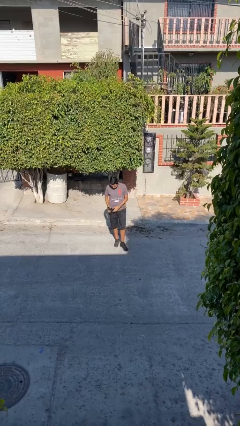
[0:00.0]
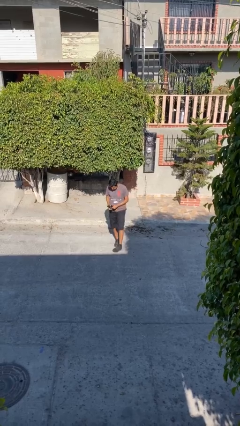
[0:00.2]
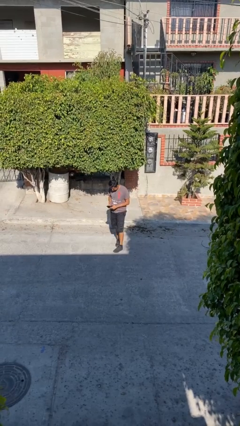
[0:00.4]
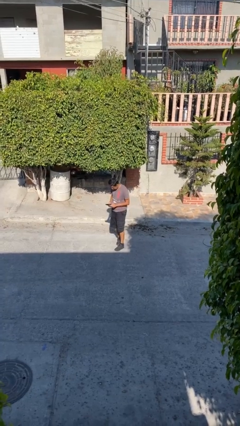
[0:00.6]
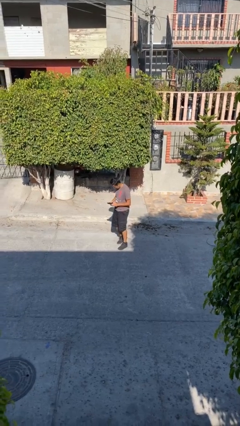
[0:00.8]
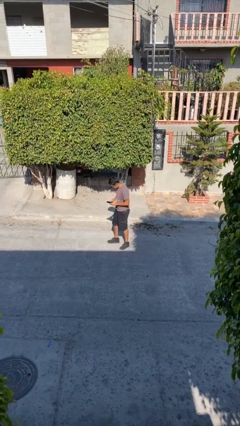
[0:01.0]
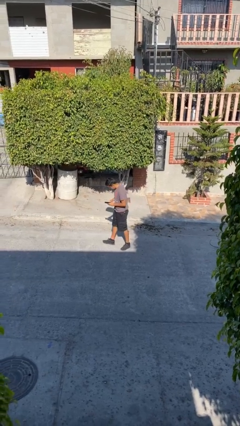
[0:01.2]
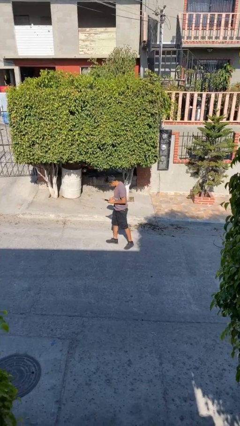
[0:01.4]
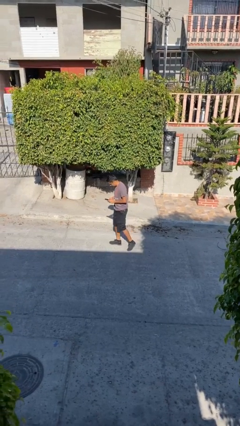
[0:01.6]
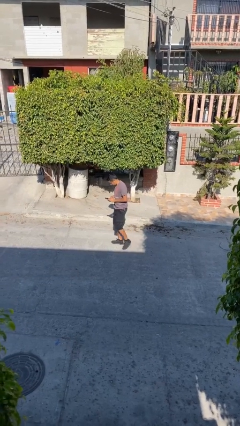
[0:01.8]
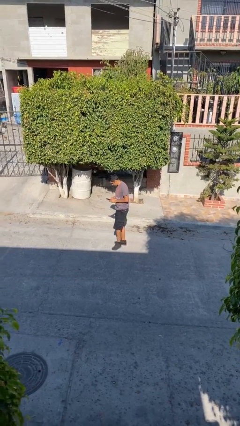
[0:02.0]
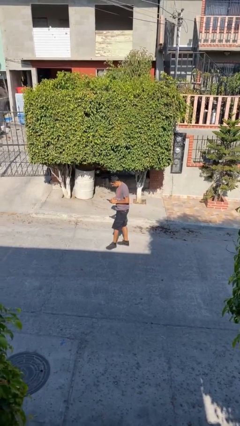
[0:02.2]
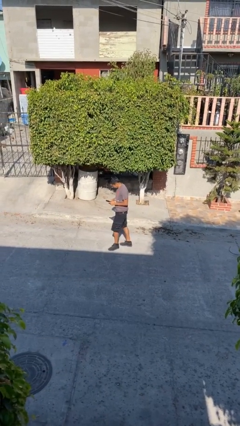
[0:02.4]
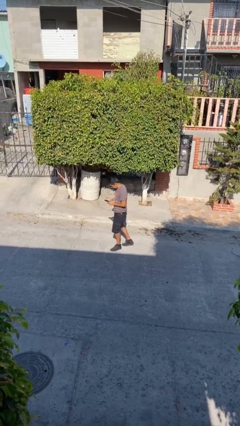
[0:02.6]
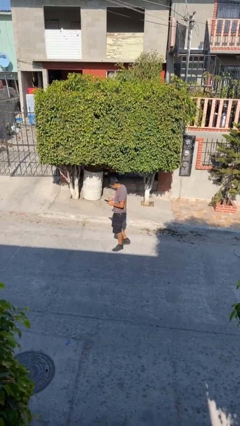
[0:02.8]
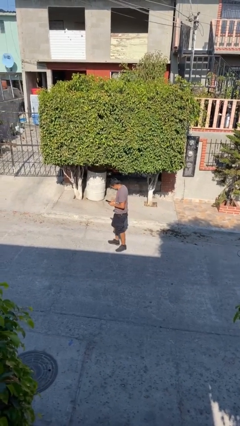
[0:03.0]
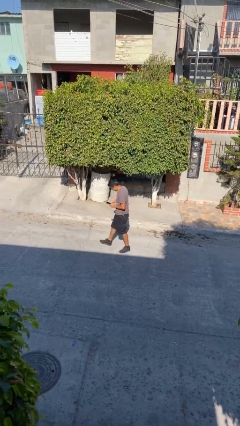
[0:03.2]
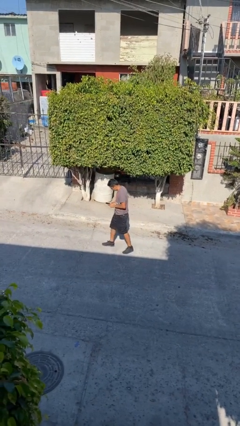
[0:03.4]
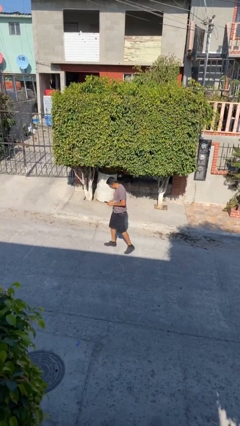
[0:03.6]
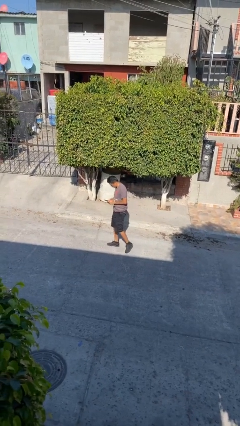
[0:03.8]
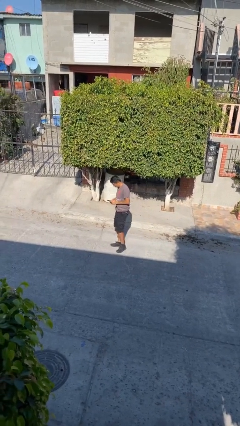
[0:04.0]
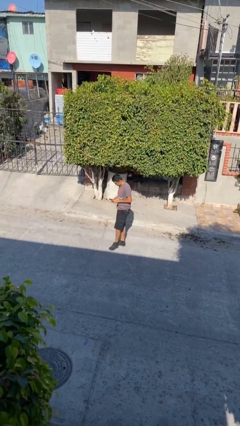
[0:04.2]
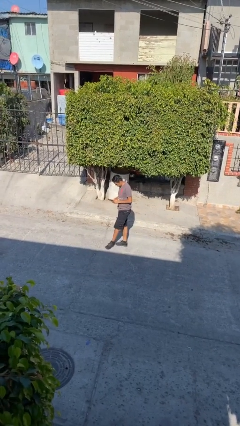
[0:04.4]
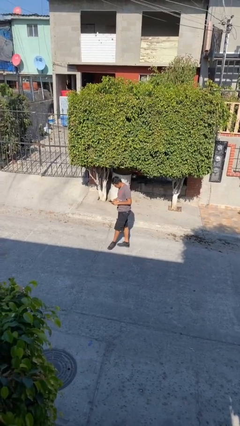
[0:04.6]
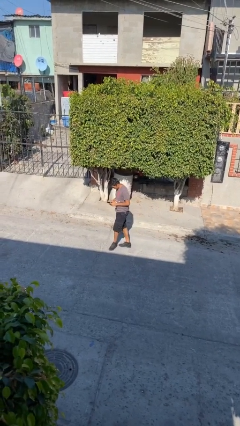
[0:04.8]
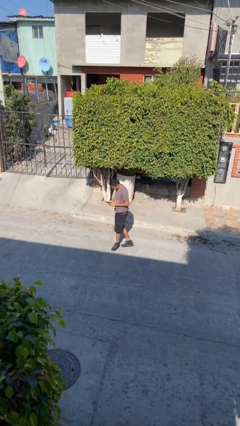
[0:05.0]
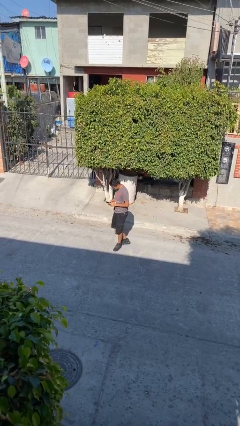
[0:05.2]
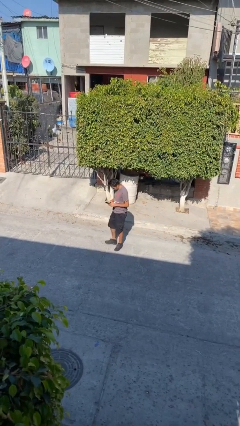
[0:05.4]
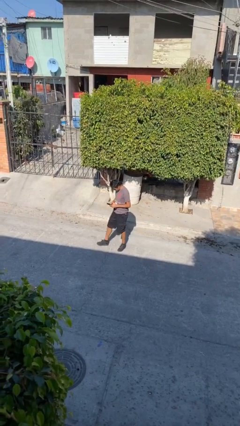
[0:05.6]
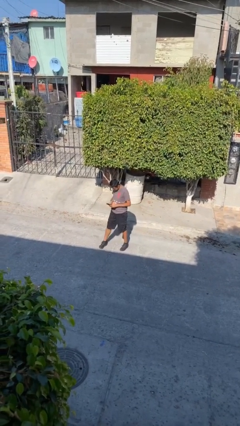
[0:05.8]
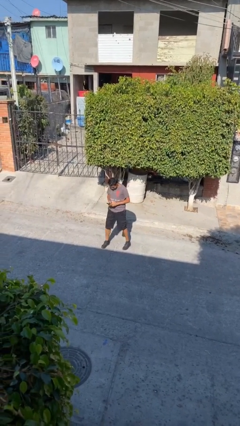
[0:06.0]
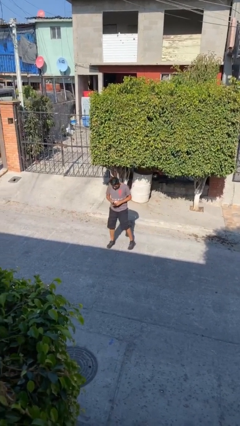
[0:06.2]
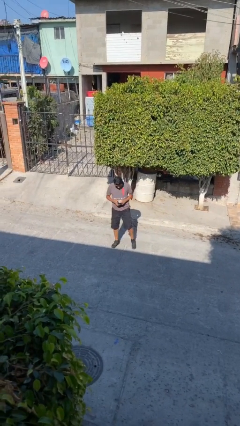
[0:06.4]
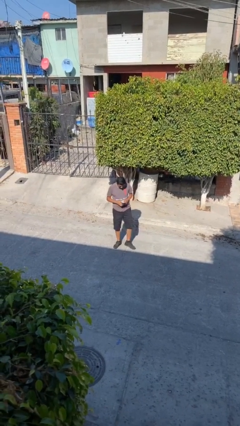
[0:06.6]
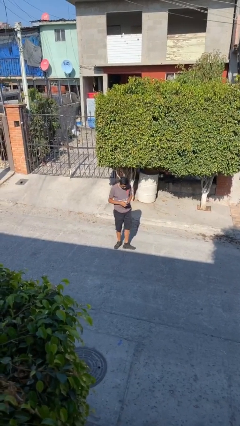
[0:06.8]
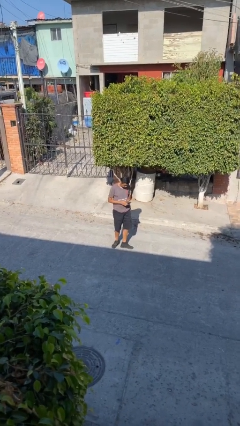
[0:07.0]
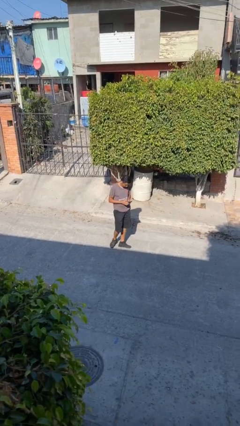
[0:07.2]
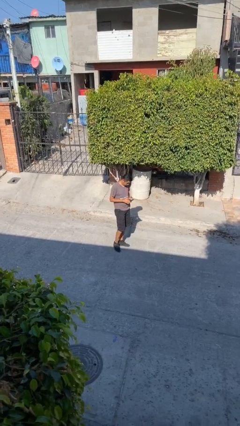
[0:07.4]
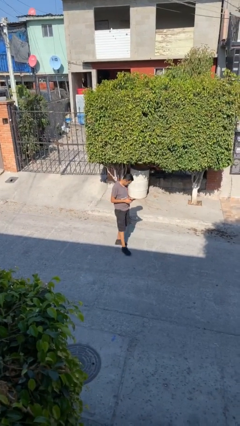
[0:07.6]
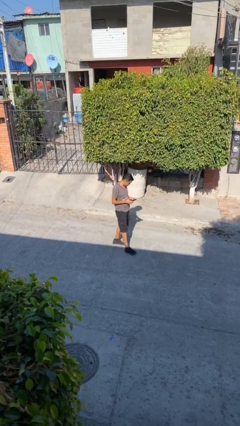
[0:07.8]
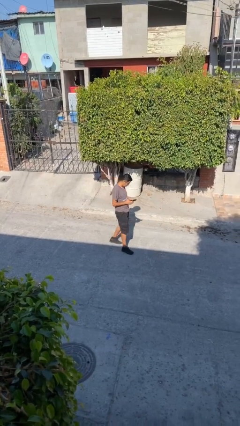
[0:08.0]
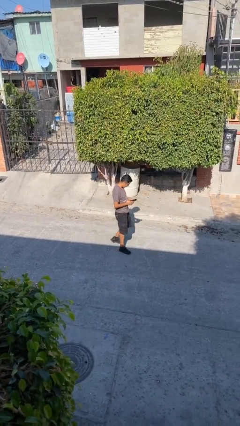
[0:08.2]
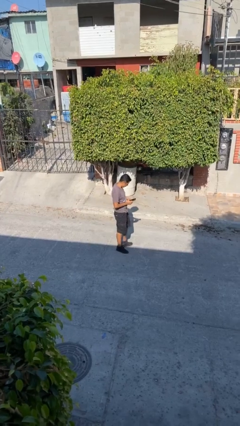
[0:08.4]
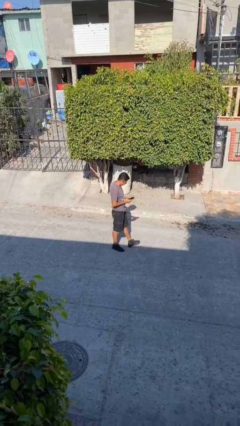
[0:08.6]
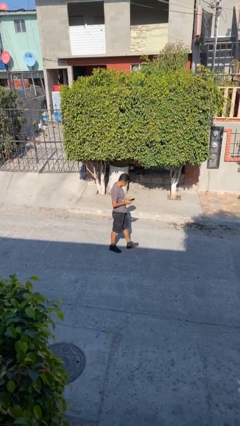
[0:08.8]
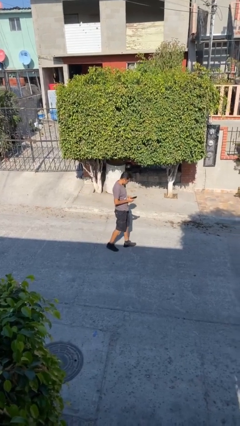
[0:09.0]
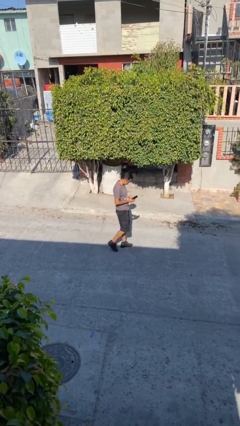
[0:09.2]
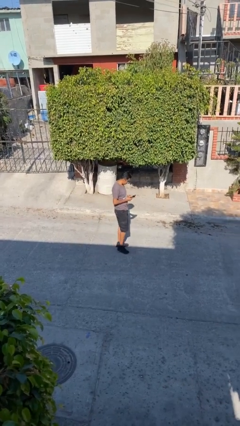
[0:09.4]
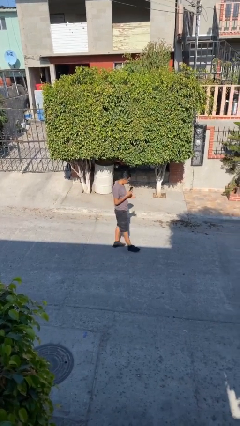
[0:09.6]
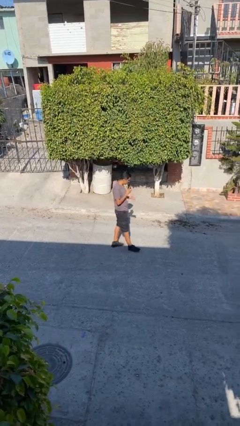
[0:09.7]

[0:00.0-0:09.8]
person texts on phone

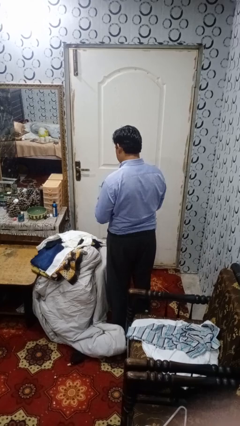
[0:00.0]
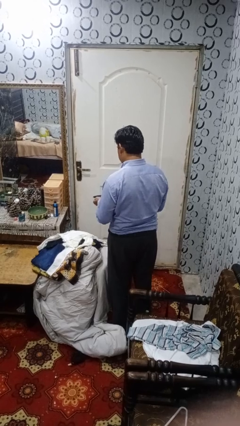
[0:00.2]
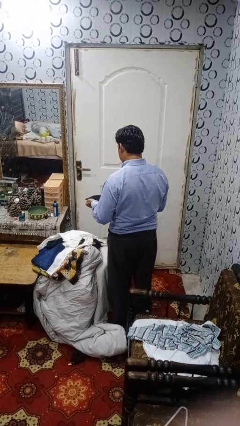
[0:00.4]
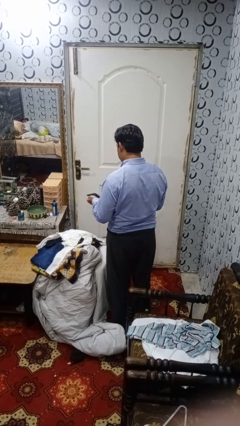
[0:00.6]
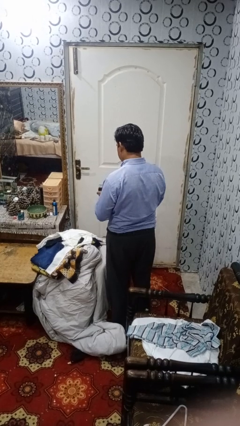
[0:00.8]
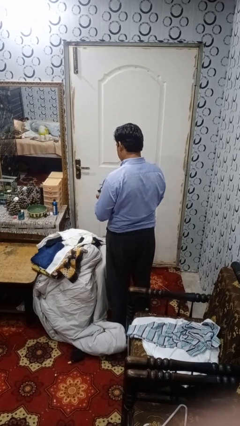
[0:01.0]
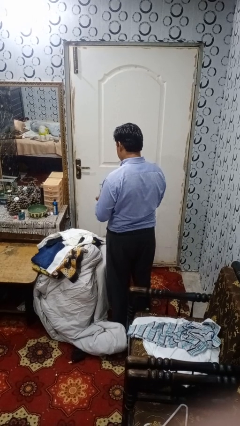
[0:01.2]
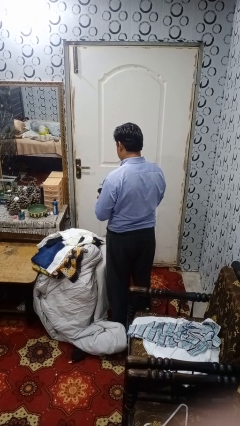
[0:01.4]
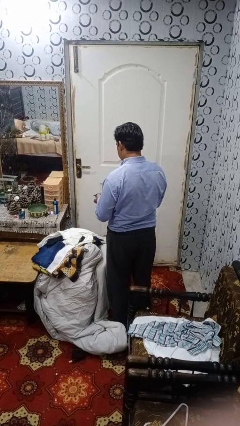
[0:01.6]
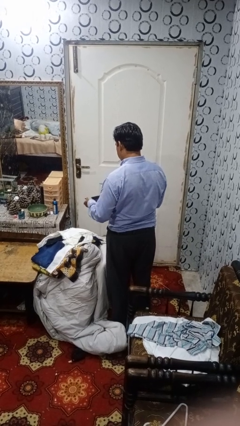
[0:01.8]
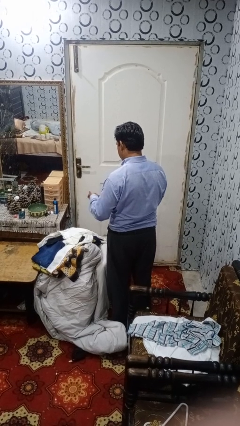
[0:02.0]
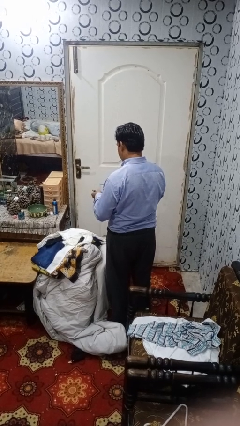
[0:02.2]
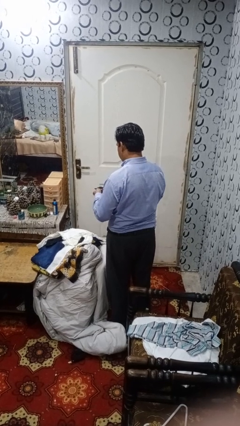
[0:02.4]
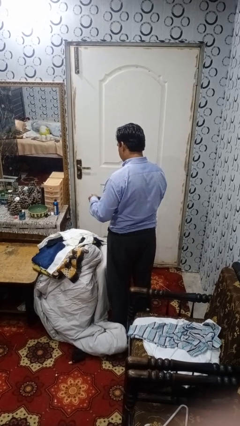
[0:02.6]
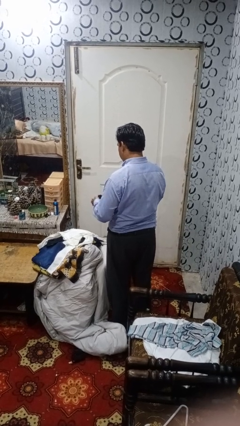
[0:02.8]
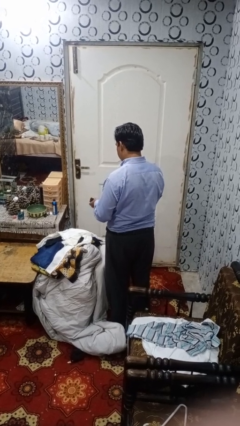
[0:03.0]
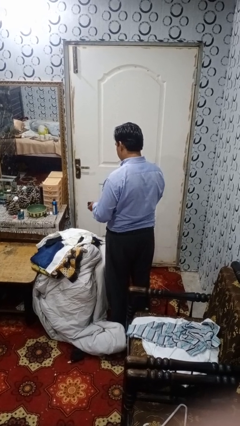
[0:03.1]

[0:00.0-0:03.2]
person folds socks

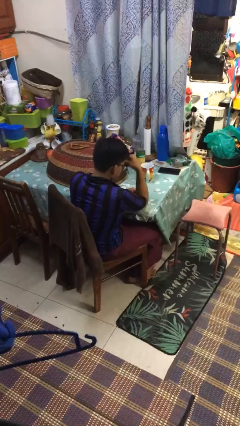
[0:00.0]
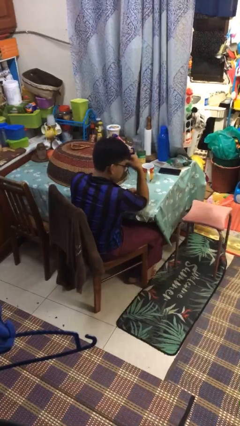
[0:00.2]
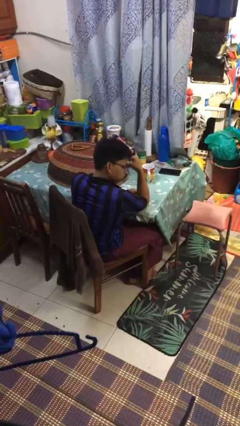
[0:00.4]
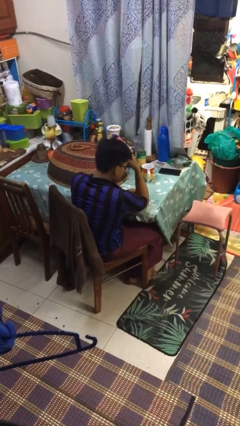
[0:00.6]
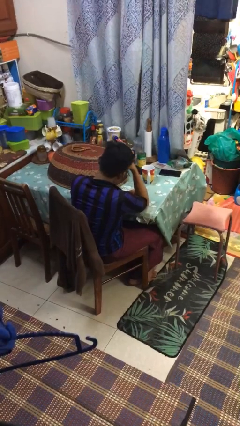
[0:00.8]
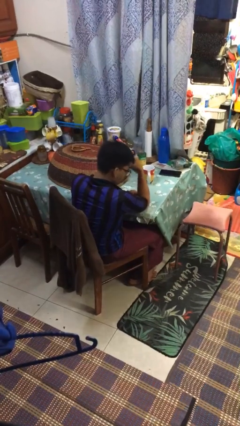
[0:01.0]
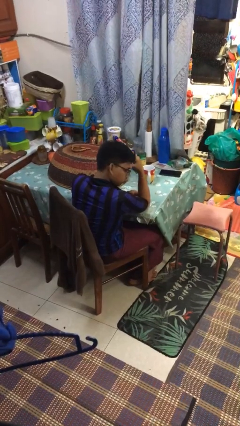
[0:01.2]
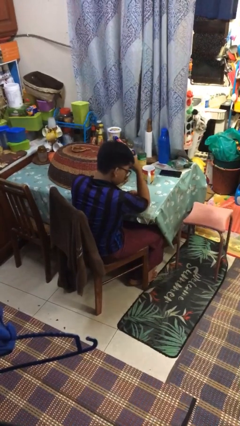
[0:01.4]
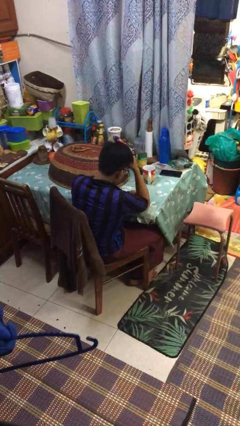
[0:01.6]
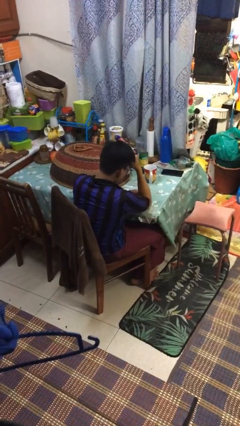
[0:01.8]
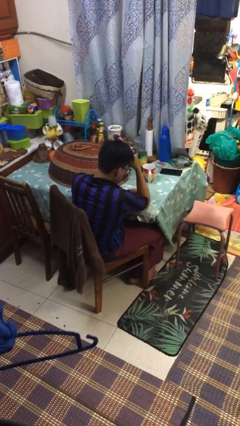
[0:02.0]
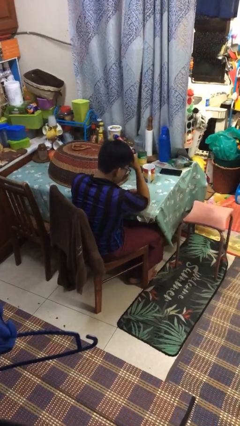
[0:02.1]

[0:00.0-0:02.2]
person shakes head

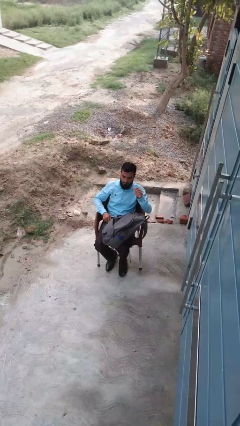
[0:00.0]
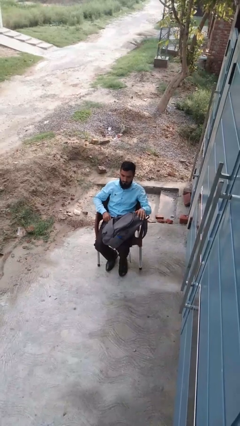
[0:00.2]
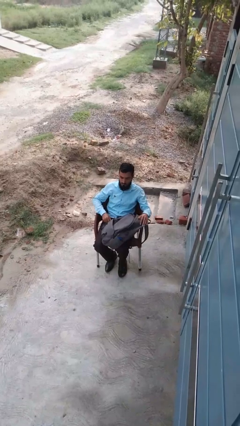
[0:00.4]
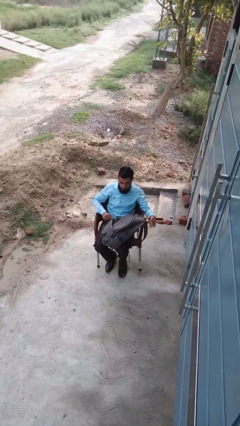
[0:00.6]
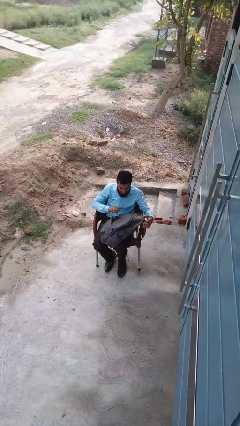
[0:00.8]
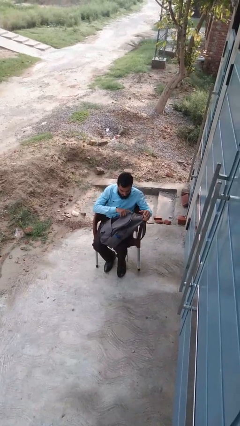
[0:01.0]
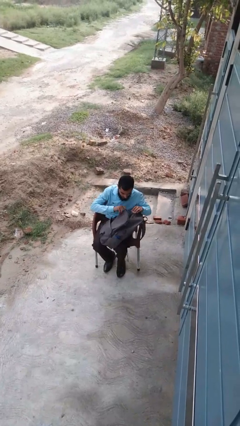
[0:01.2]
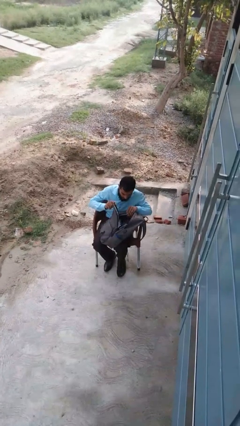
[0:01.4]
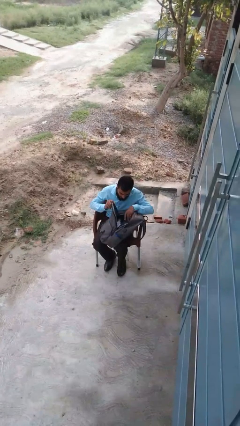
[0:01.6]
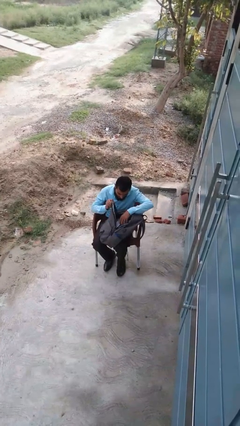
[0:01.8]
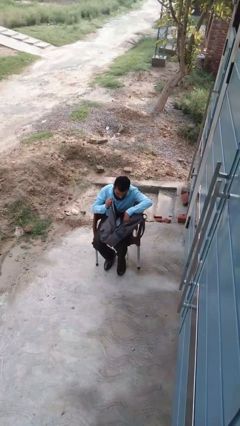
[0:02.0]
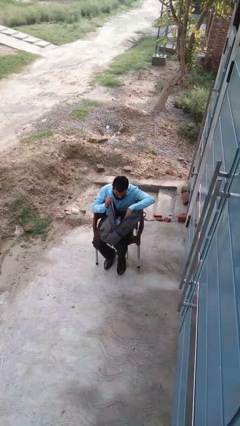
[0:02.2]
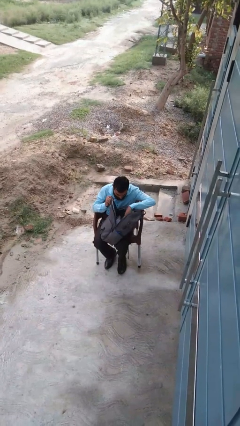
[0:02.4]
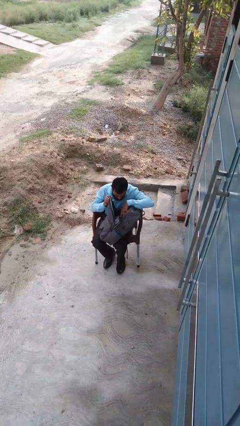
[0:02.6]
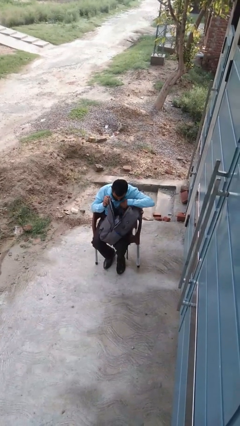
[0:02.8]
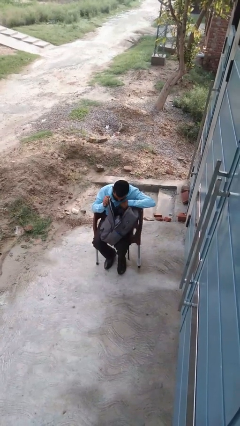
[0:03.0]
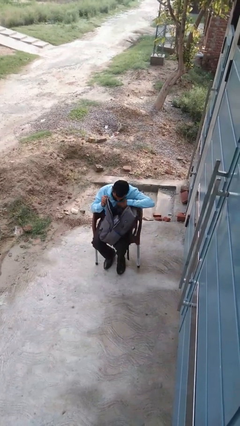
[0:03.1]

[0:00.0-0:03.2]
person searches in backpack
